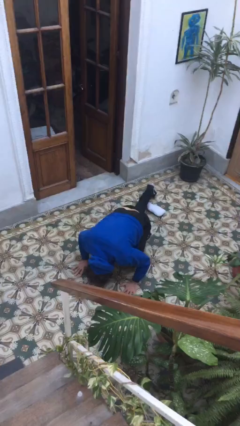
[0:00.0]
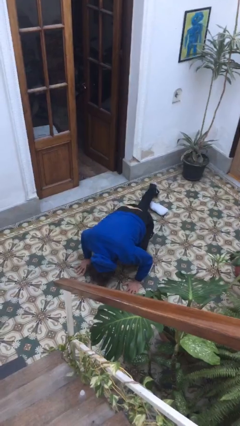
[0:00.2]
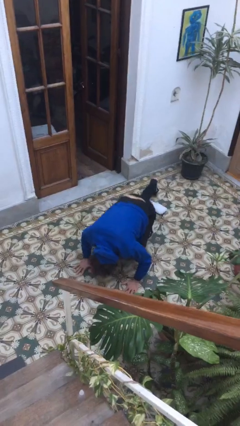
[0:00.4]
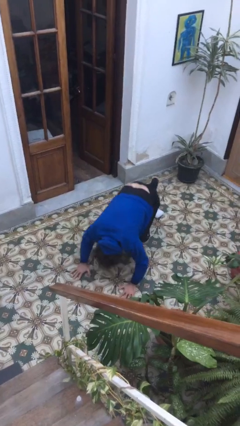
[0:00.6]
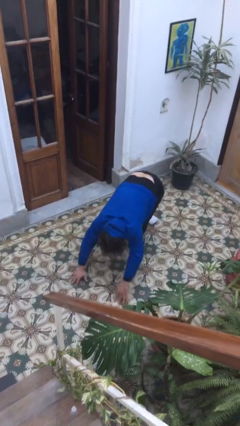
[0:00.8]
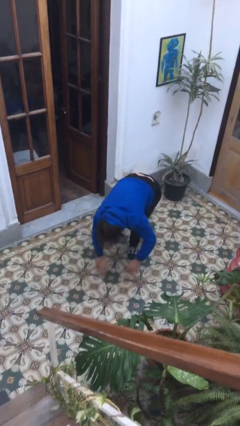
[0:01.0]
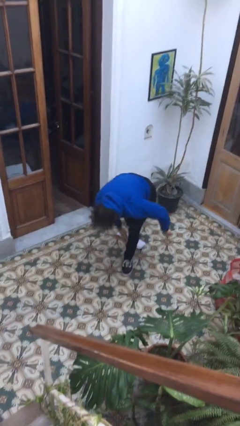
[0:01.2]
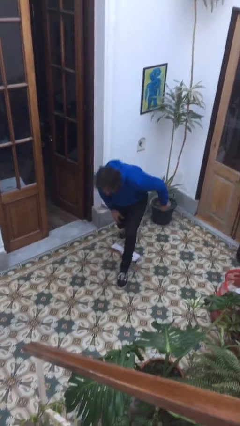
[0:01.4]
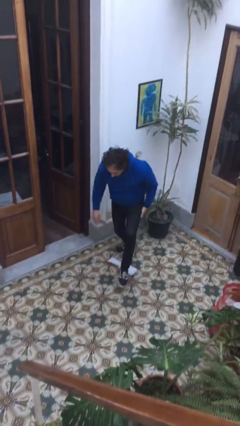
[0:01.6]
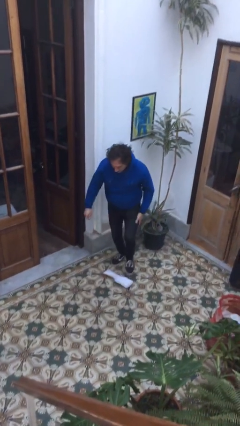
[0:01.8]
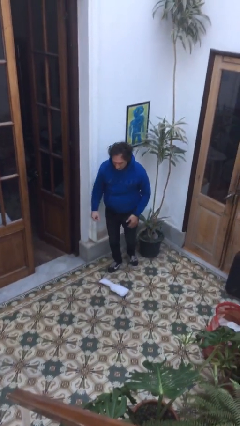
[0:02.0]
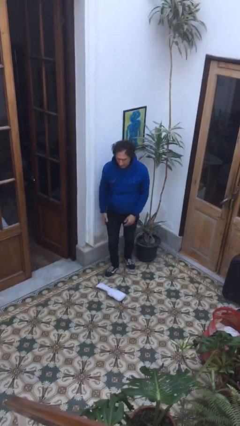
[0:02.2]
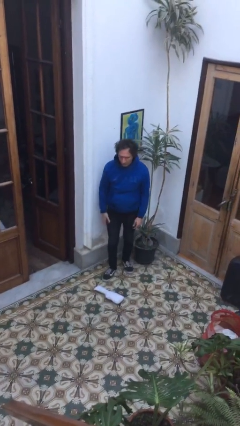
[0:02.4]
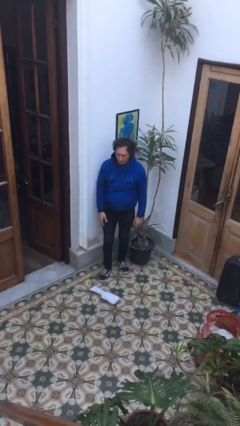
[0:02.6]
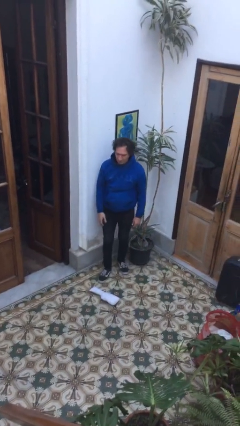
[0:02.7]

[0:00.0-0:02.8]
person stands up from floor

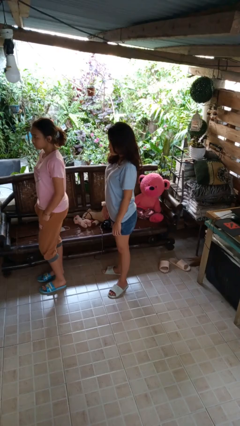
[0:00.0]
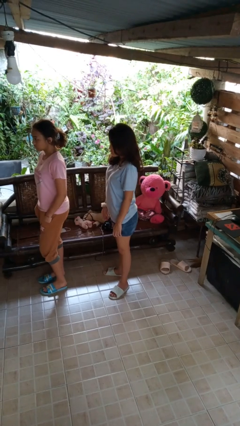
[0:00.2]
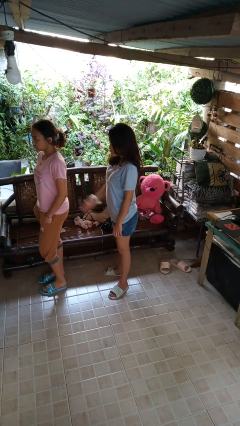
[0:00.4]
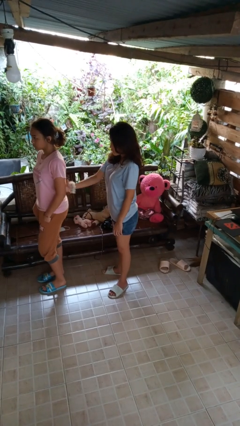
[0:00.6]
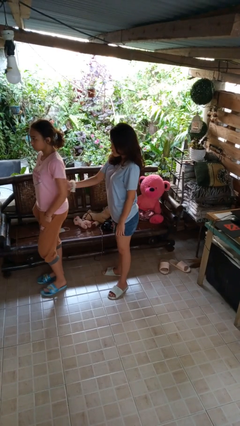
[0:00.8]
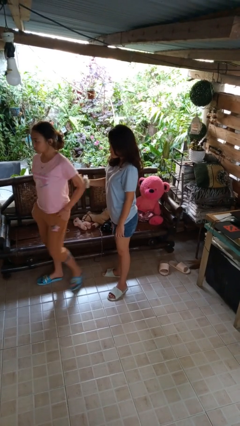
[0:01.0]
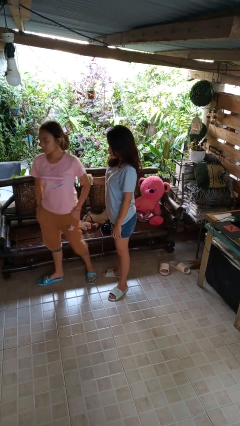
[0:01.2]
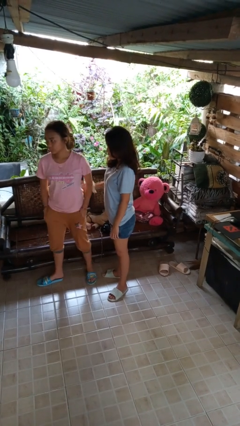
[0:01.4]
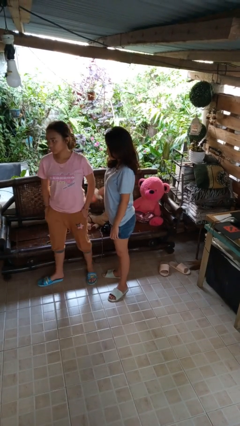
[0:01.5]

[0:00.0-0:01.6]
person grabs person by bicep

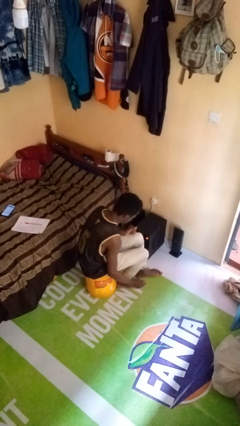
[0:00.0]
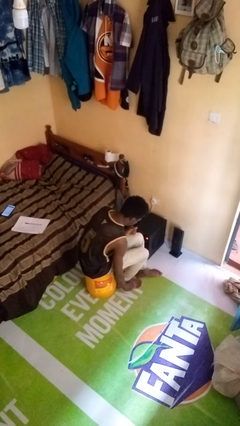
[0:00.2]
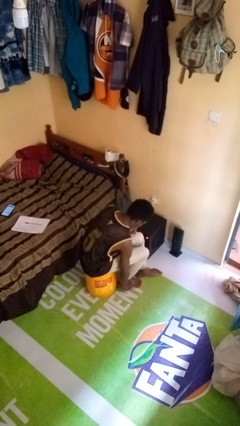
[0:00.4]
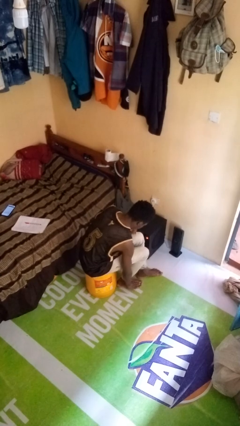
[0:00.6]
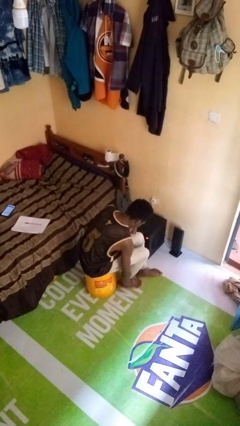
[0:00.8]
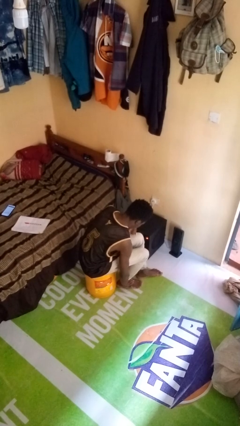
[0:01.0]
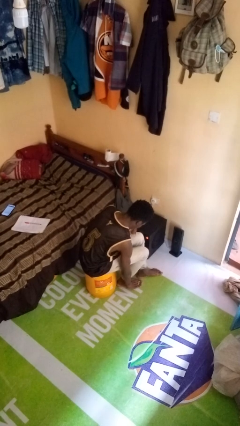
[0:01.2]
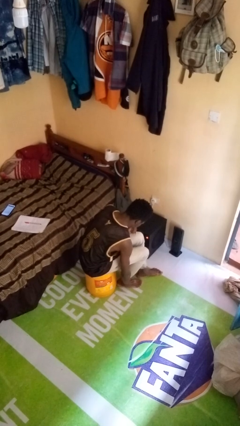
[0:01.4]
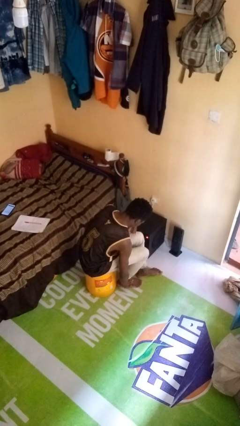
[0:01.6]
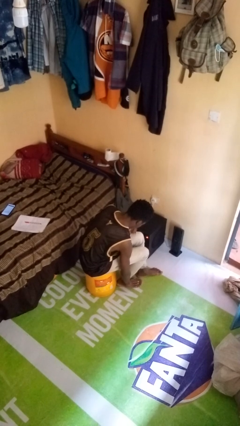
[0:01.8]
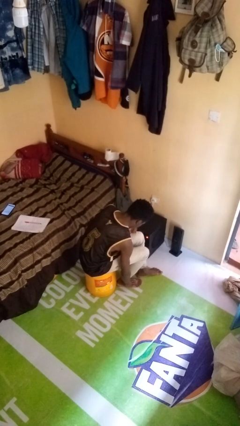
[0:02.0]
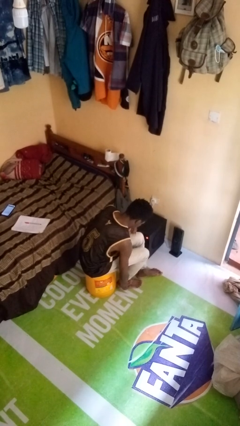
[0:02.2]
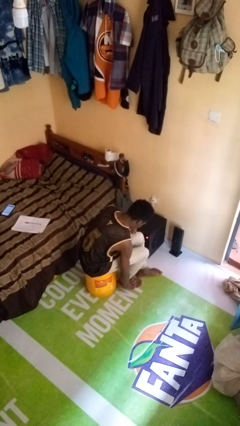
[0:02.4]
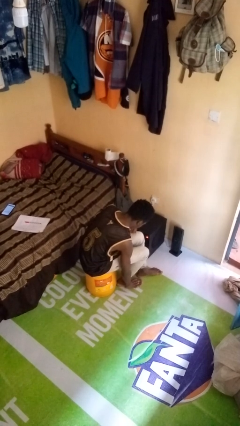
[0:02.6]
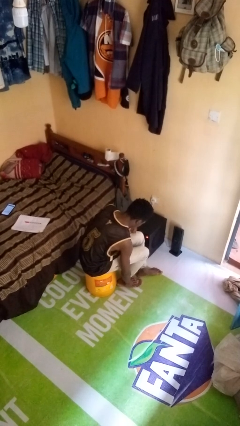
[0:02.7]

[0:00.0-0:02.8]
person rubs foot

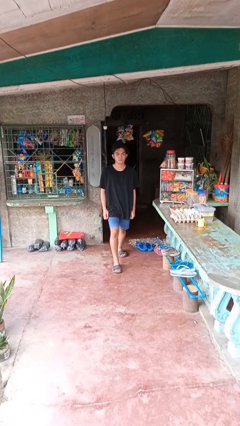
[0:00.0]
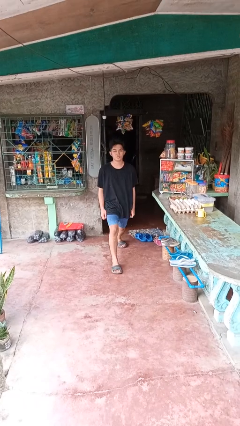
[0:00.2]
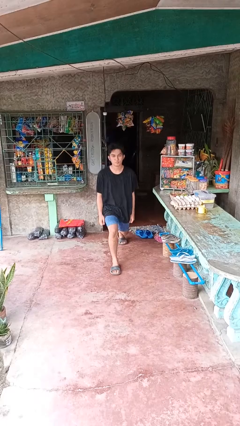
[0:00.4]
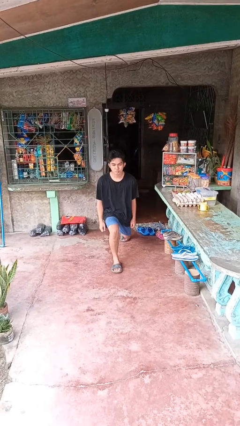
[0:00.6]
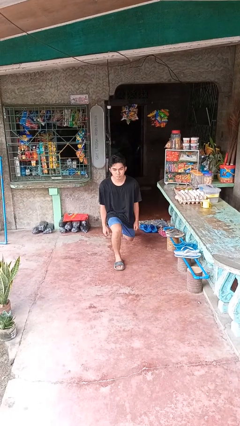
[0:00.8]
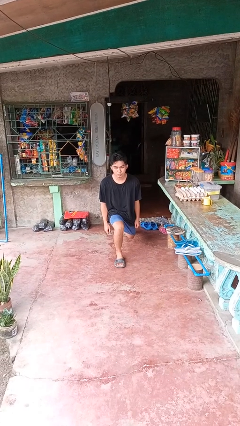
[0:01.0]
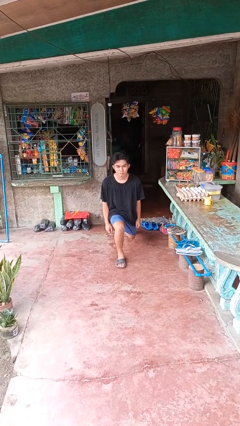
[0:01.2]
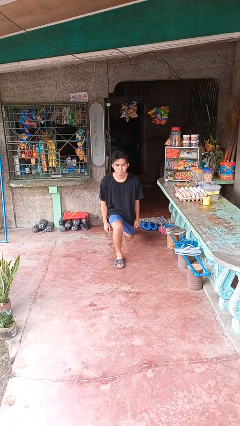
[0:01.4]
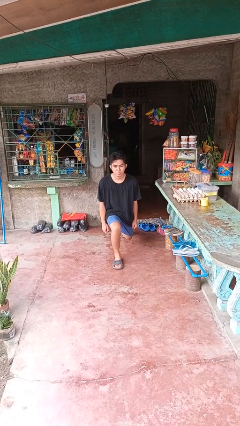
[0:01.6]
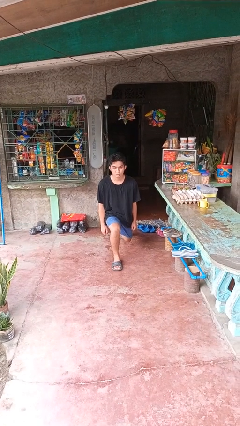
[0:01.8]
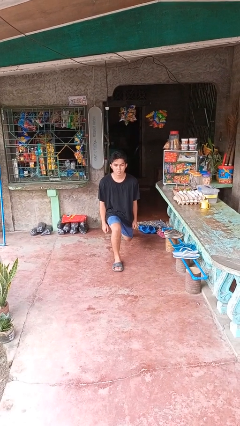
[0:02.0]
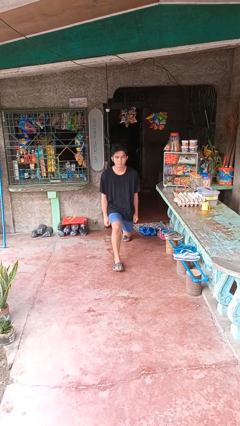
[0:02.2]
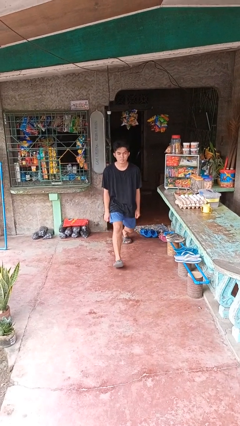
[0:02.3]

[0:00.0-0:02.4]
person exercises with lunges

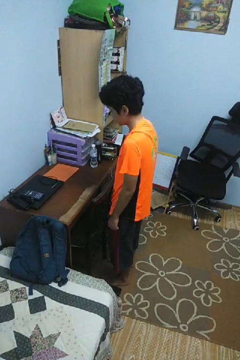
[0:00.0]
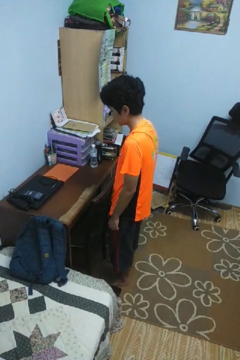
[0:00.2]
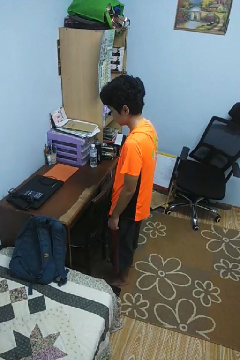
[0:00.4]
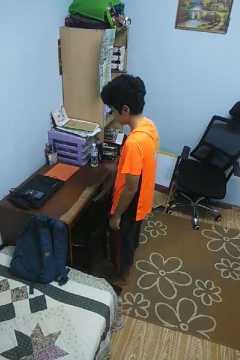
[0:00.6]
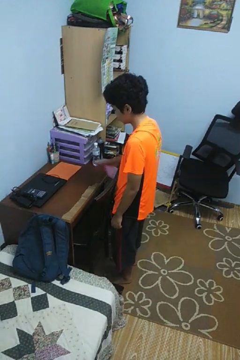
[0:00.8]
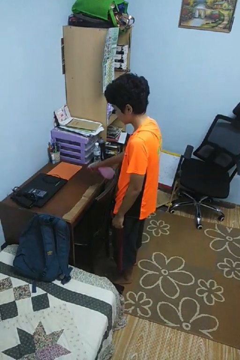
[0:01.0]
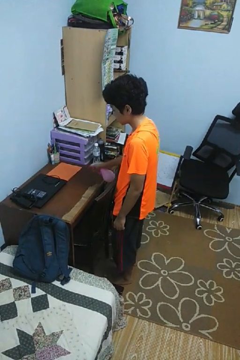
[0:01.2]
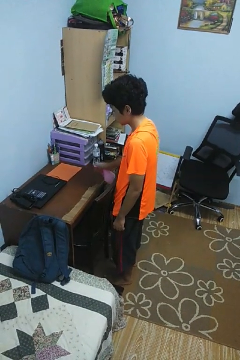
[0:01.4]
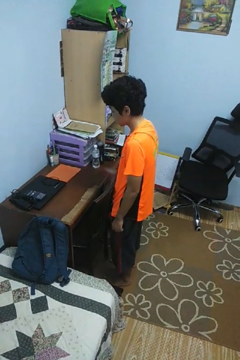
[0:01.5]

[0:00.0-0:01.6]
person sprays from bottle

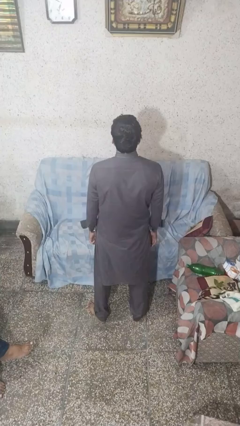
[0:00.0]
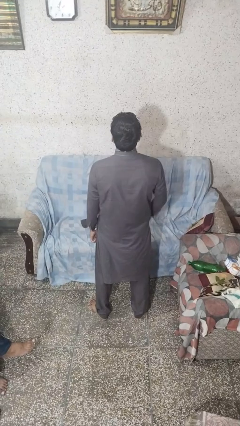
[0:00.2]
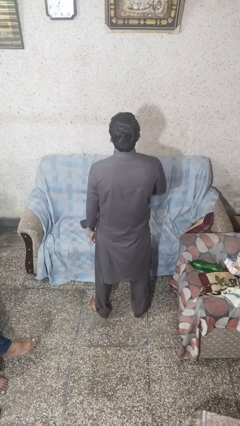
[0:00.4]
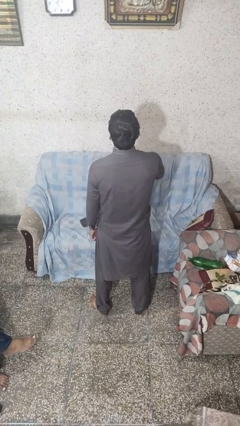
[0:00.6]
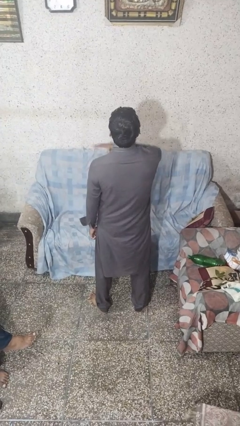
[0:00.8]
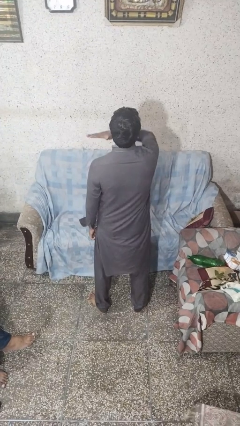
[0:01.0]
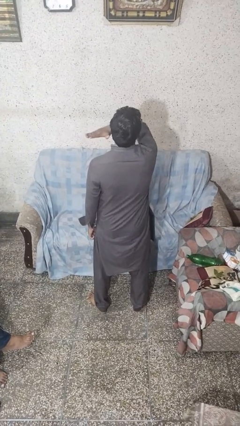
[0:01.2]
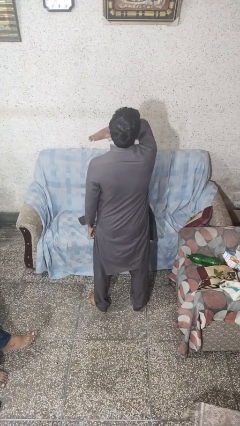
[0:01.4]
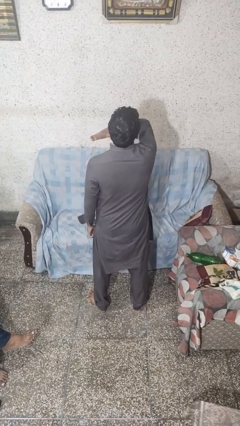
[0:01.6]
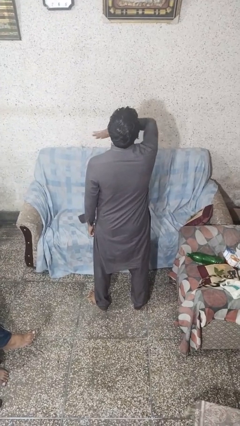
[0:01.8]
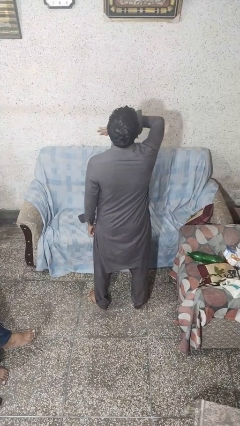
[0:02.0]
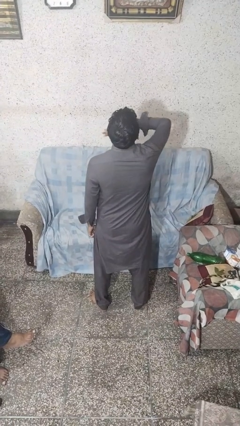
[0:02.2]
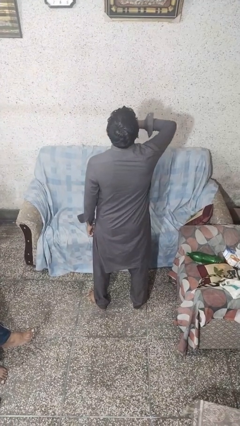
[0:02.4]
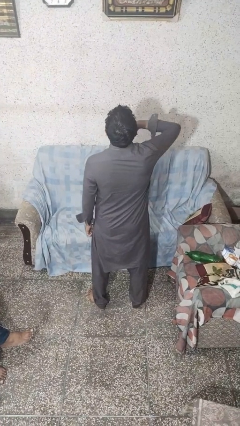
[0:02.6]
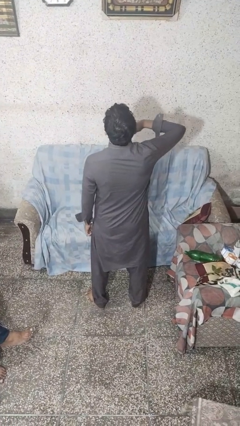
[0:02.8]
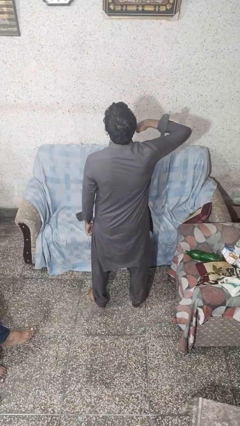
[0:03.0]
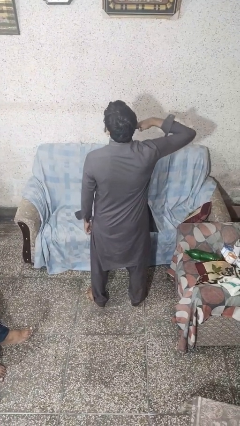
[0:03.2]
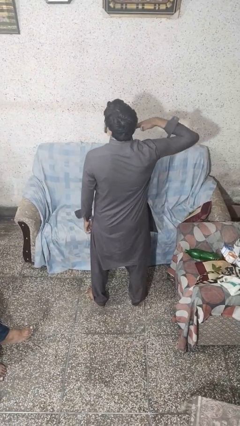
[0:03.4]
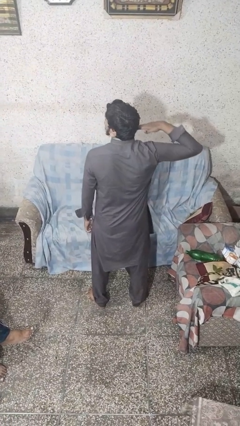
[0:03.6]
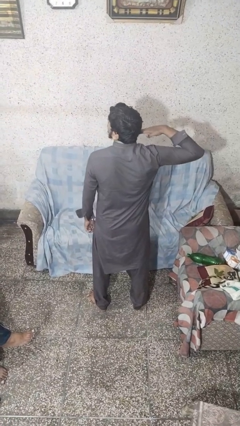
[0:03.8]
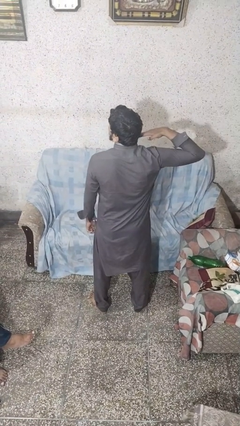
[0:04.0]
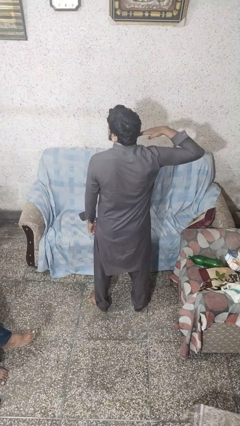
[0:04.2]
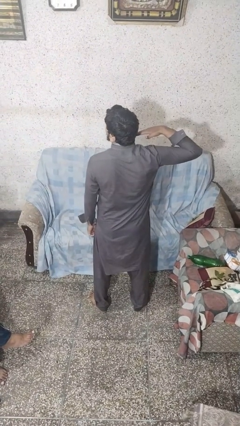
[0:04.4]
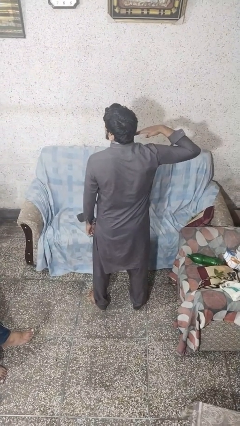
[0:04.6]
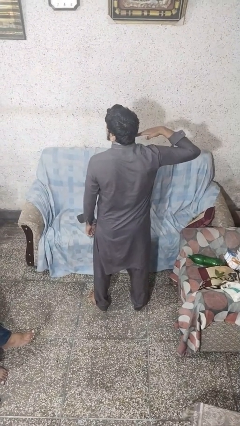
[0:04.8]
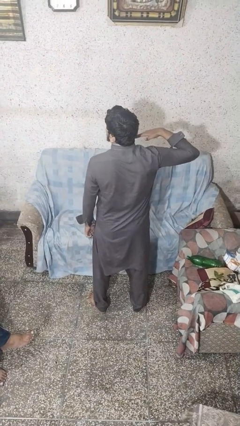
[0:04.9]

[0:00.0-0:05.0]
person gestures cut

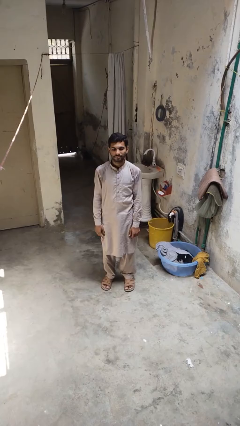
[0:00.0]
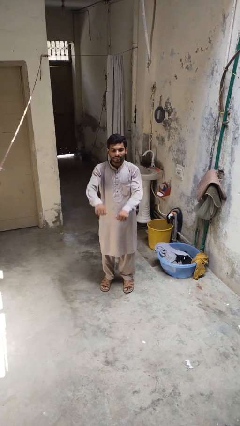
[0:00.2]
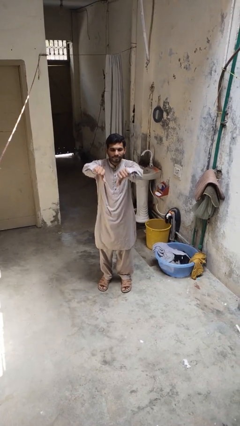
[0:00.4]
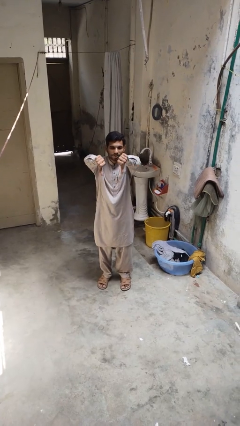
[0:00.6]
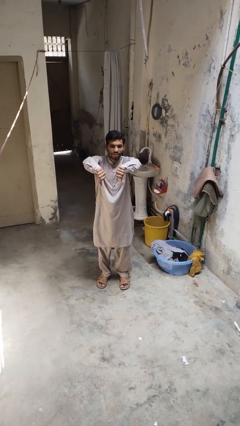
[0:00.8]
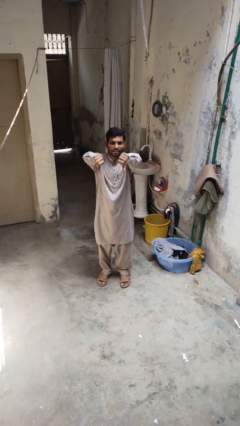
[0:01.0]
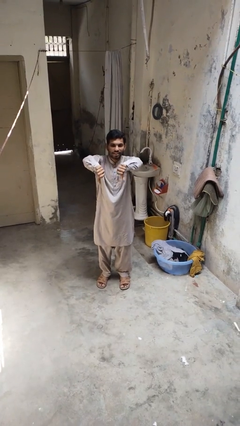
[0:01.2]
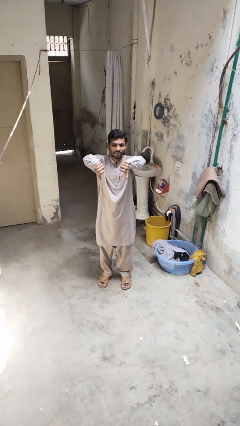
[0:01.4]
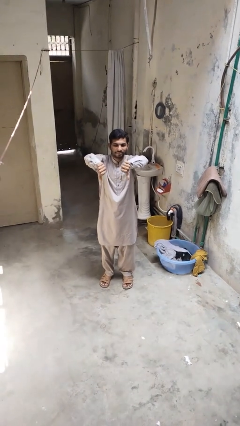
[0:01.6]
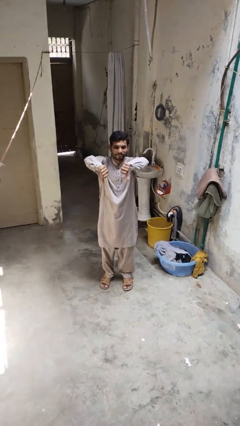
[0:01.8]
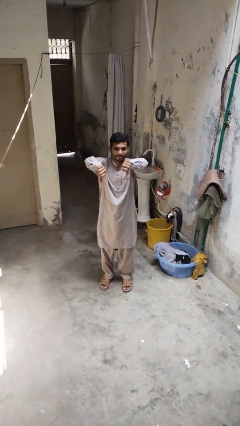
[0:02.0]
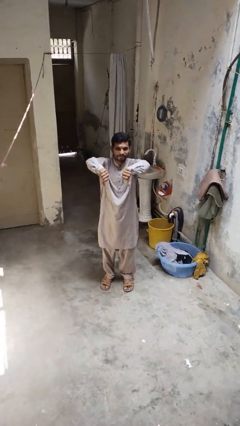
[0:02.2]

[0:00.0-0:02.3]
person gestures thumbs down
